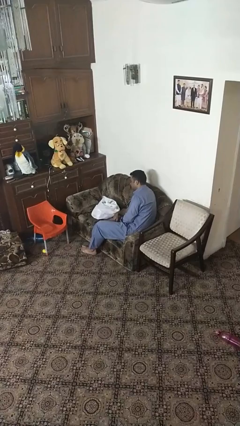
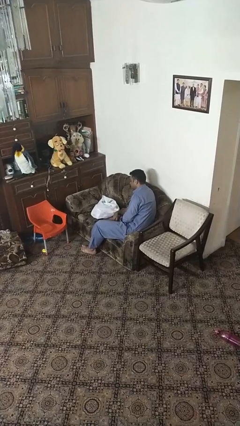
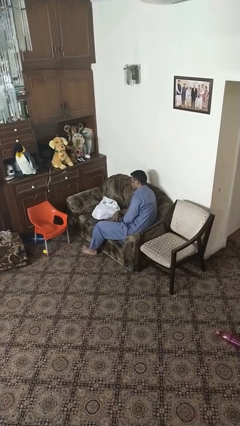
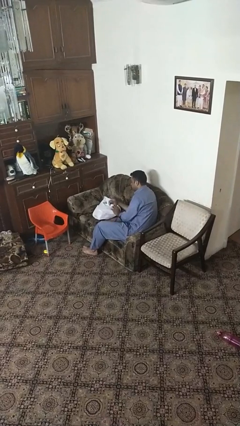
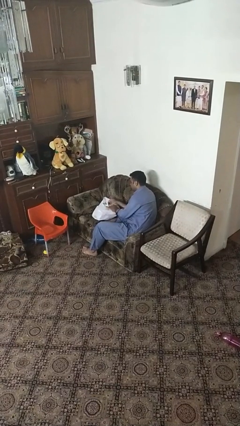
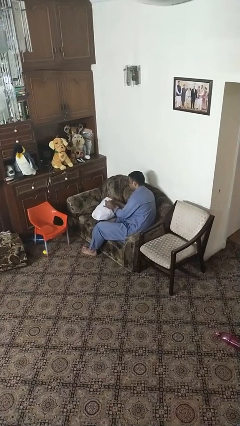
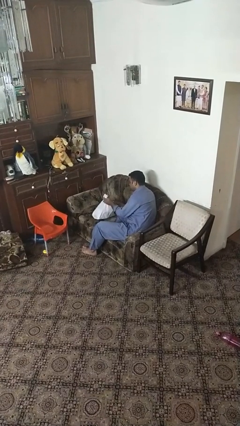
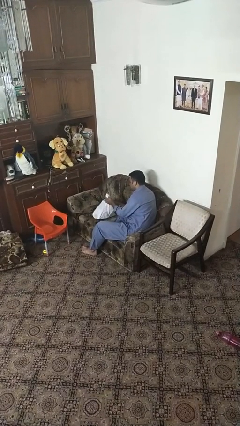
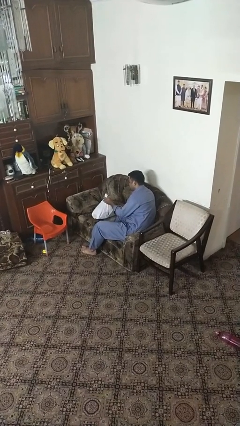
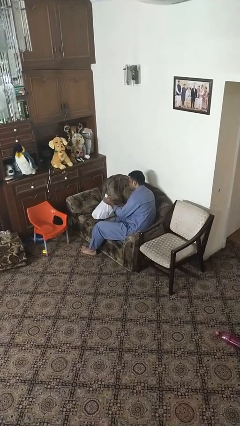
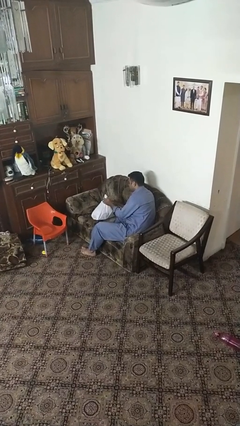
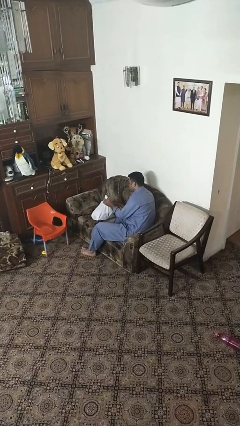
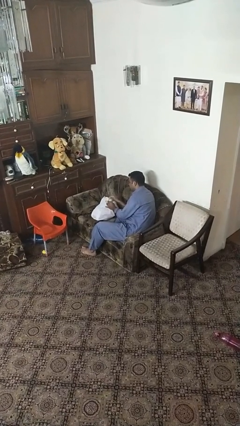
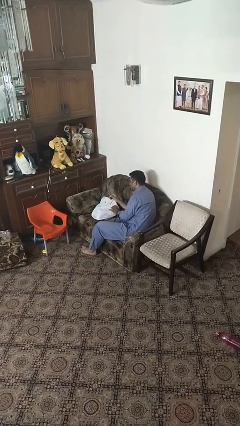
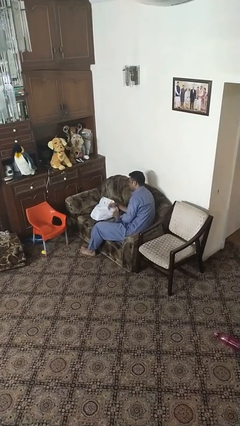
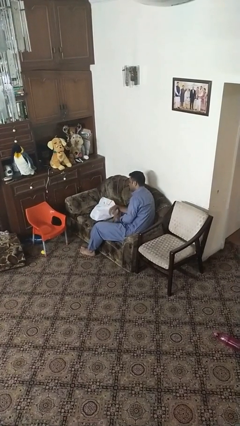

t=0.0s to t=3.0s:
person searches in bag

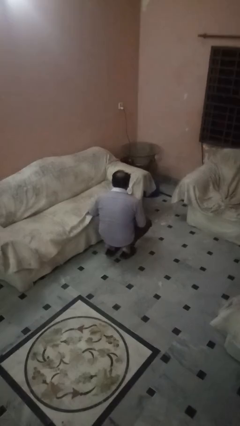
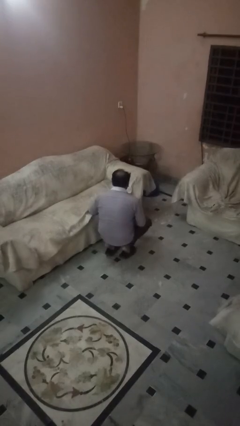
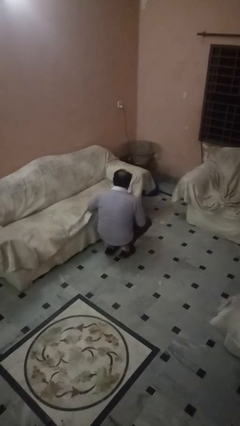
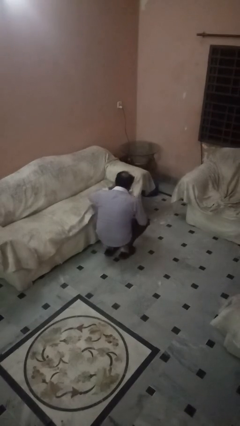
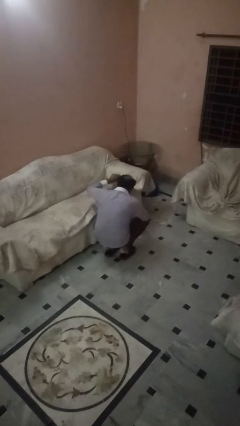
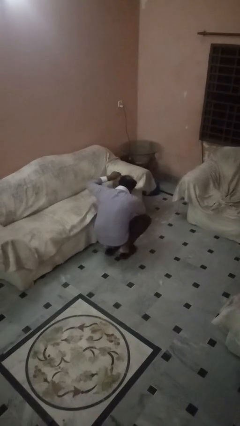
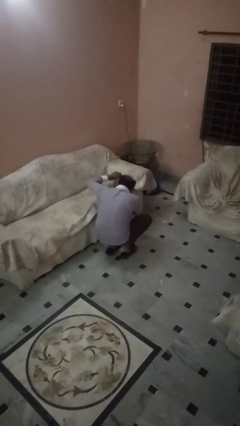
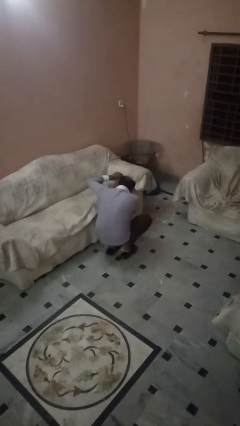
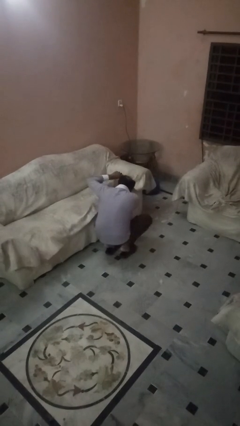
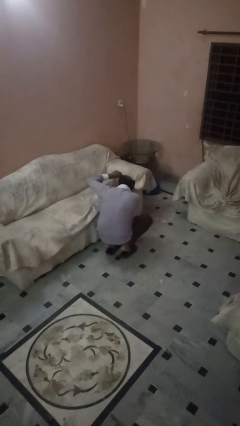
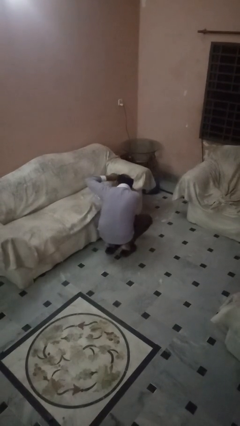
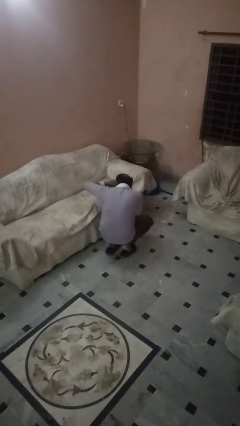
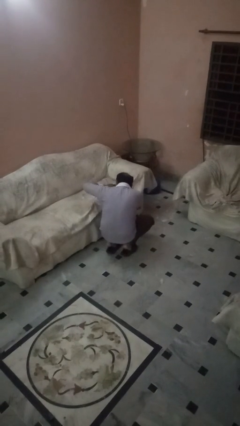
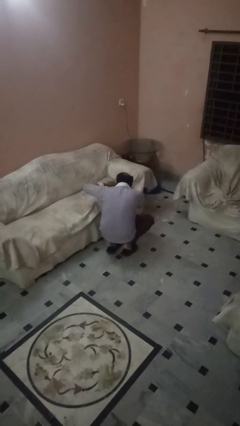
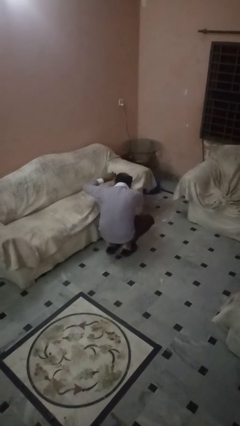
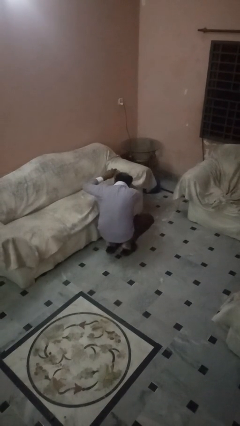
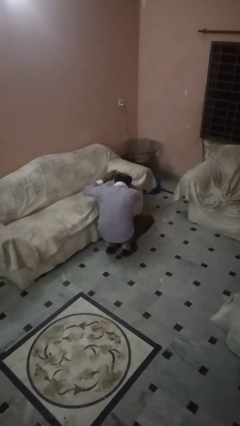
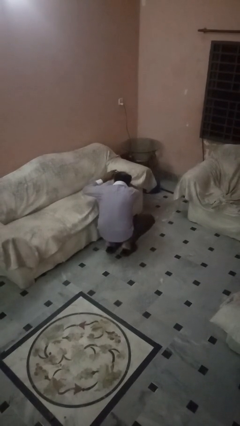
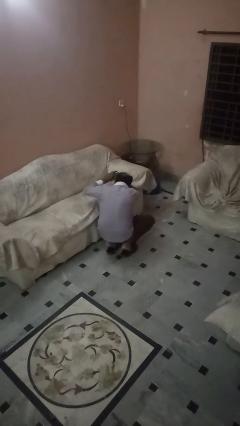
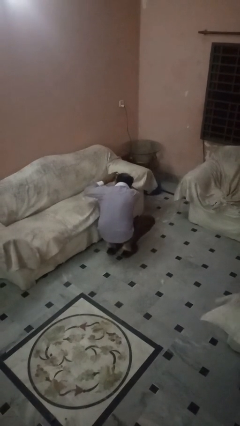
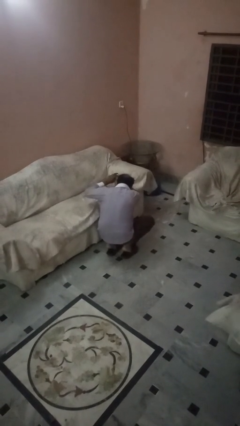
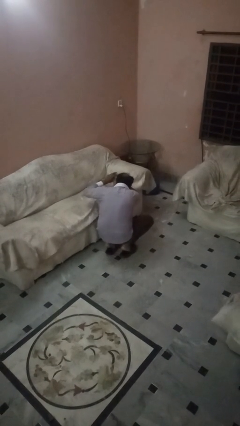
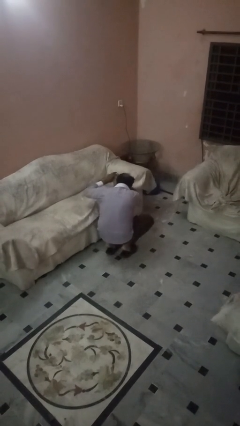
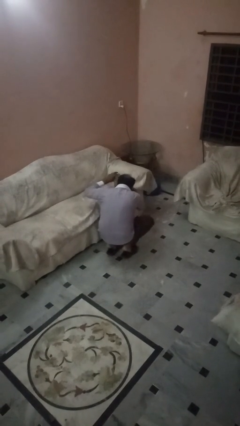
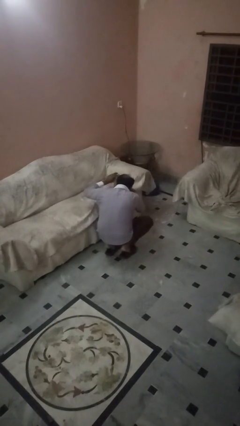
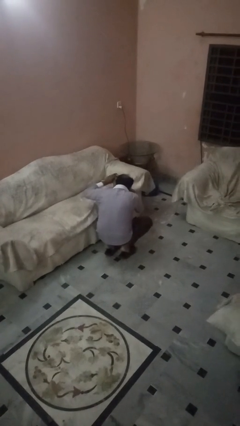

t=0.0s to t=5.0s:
person searches in couch

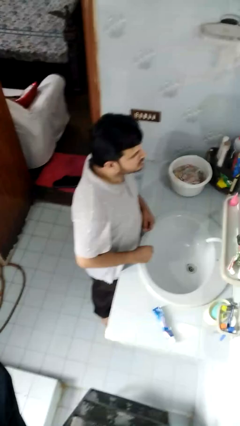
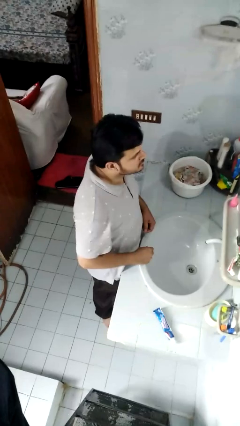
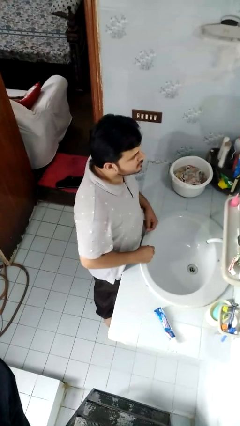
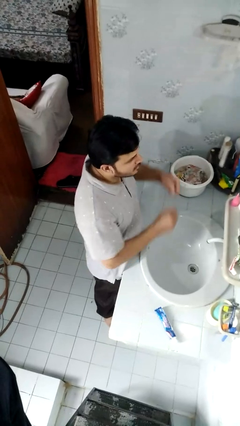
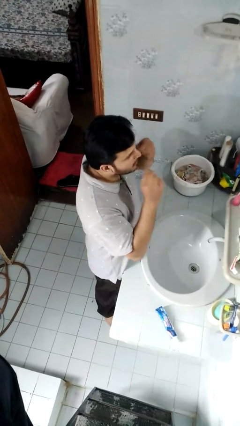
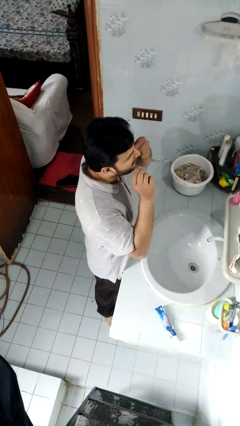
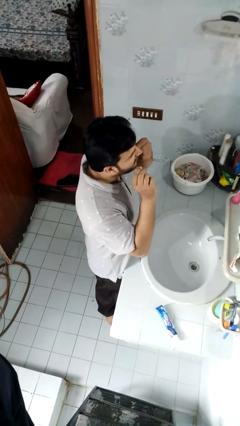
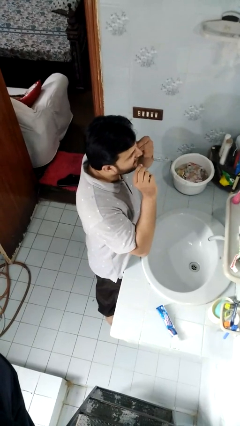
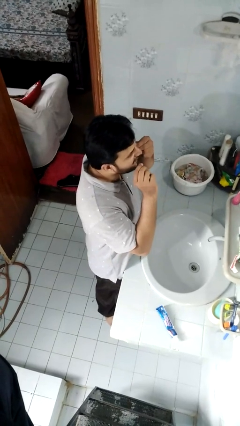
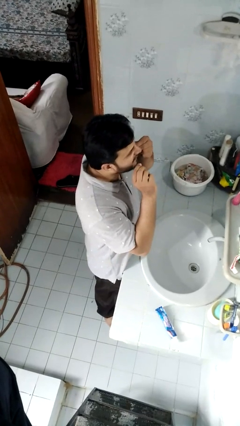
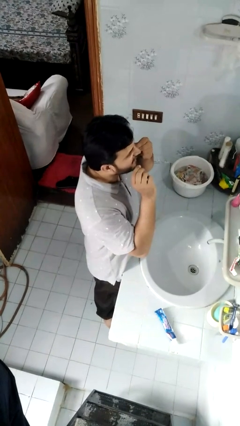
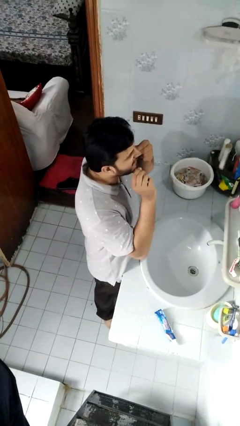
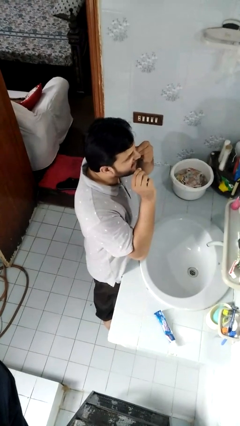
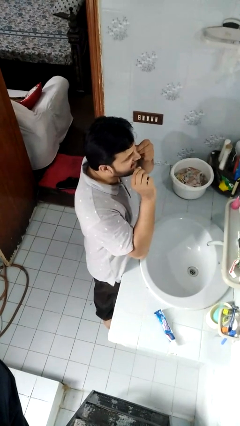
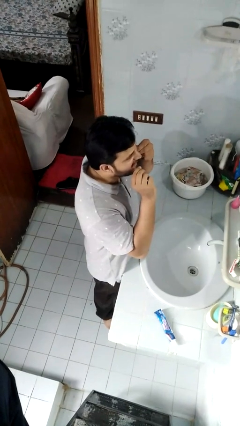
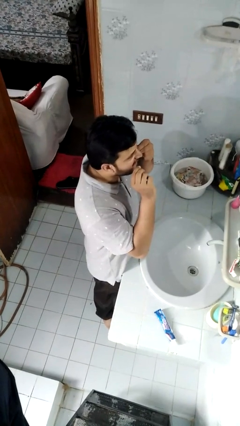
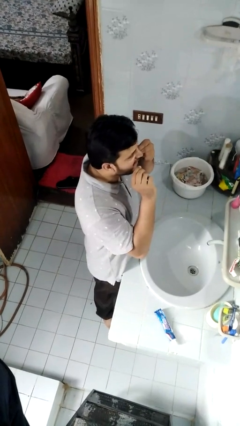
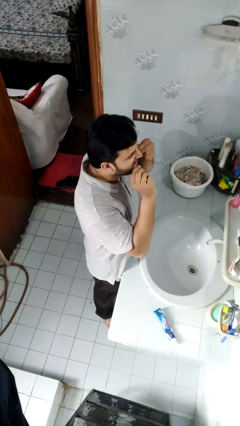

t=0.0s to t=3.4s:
person flosses

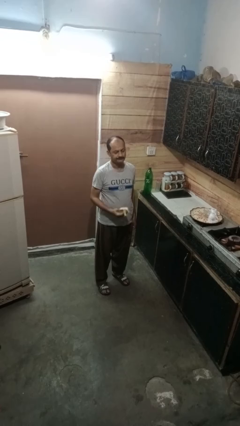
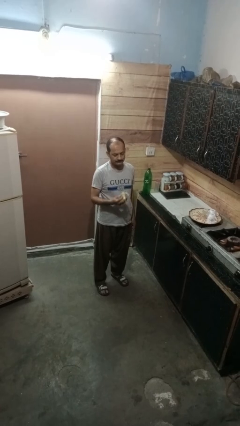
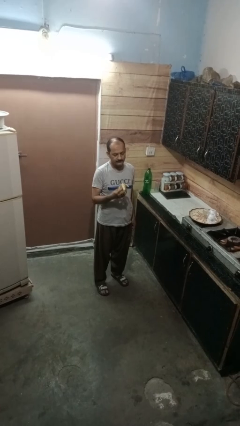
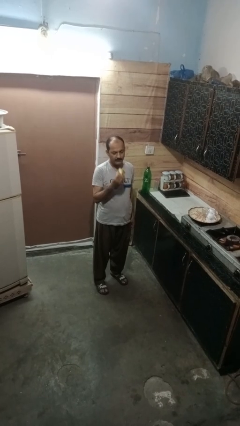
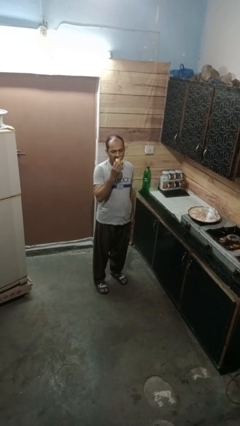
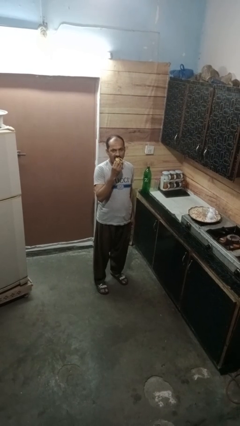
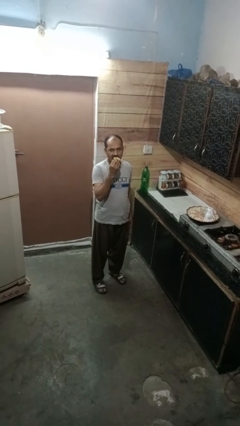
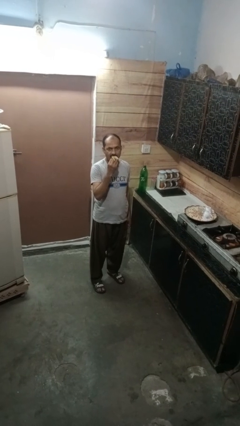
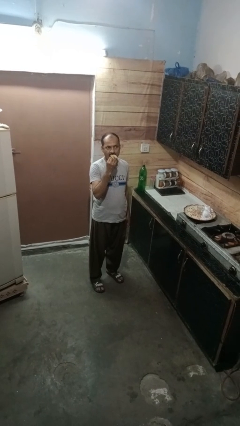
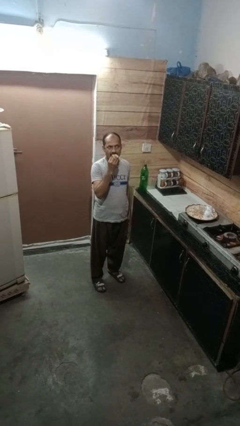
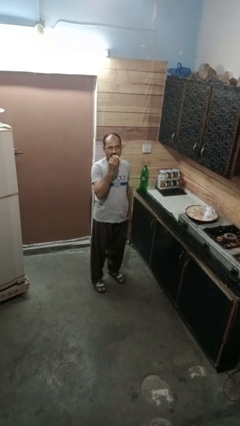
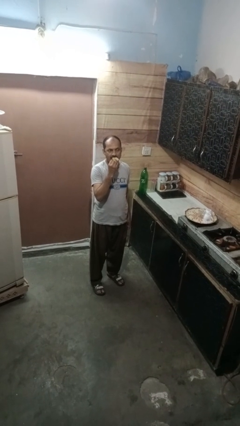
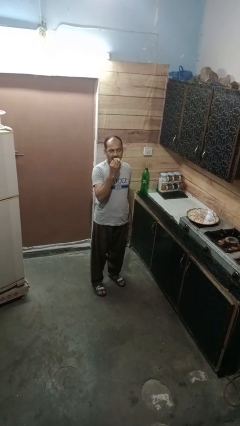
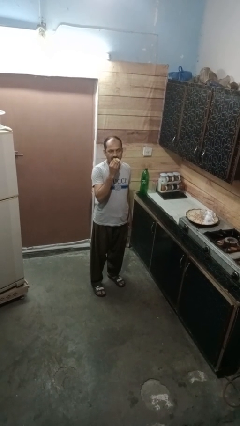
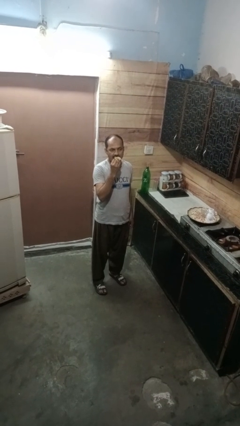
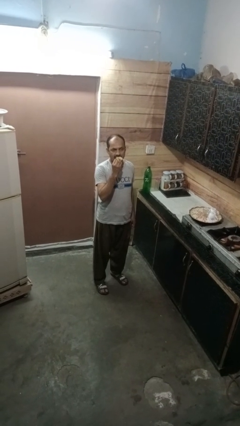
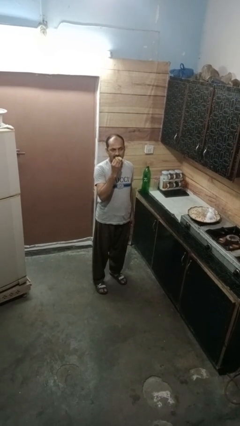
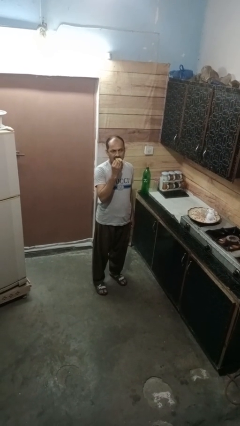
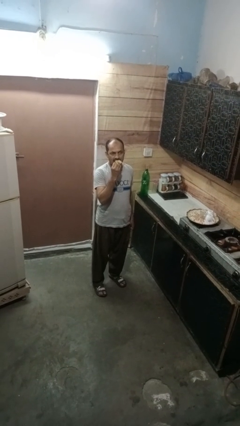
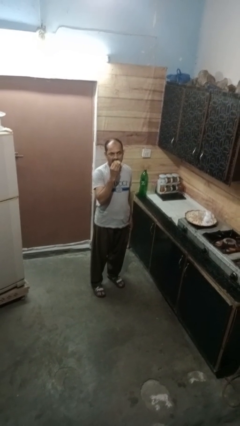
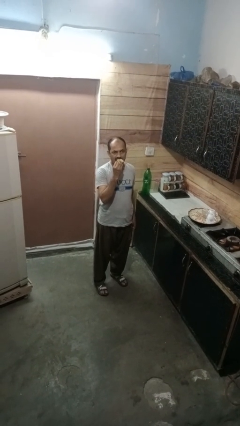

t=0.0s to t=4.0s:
person eats banana

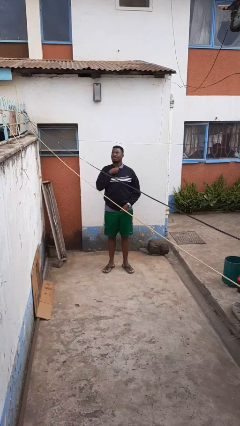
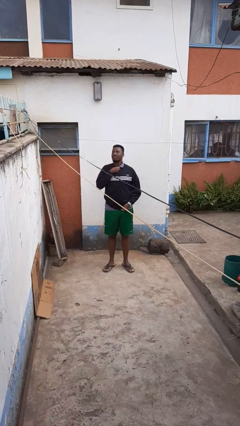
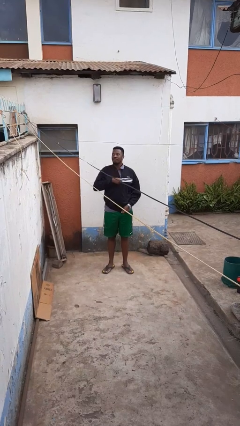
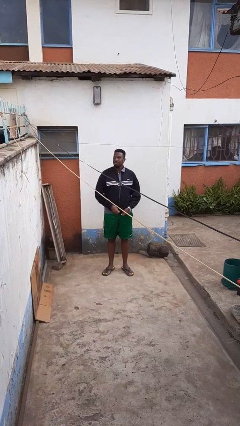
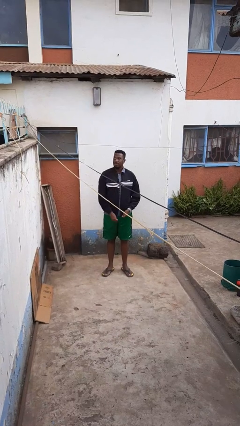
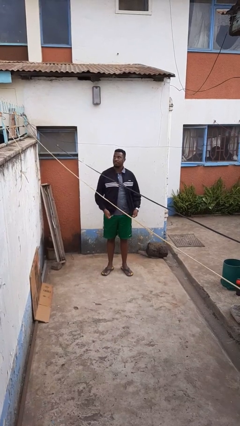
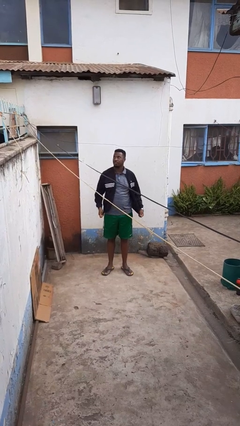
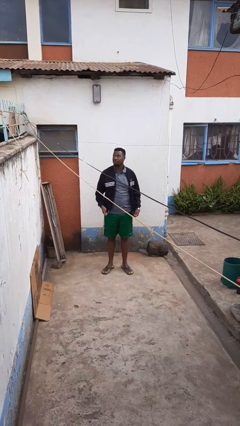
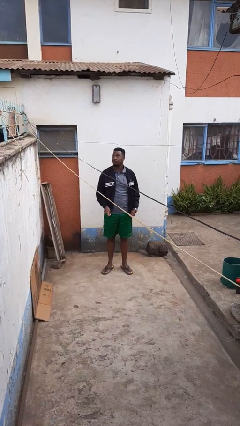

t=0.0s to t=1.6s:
person unzips jacket
